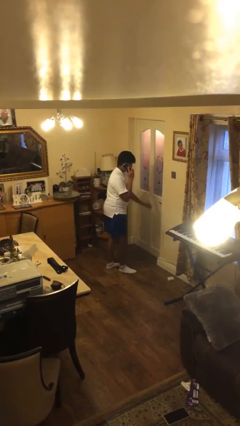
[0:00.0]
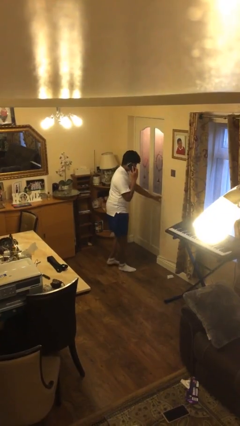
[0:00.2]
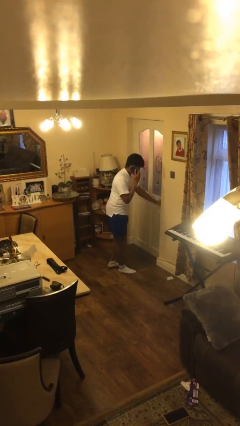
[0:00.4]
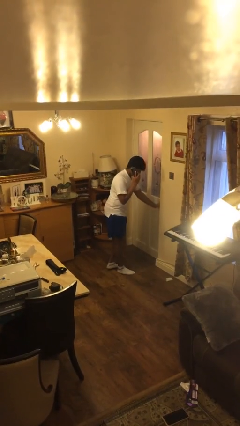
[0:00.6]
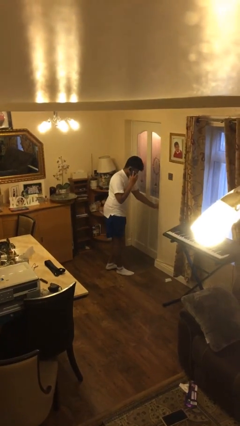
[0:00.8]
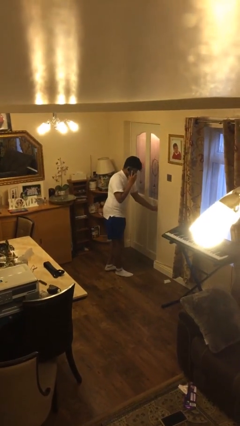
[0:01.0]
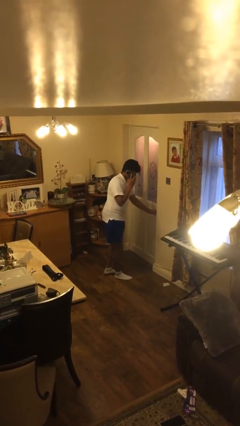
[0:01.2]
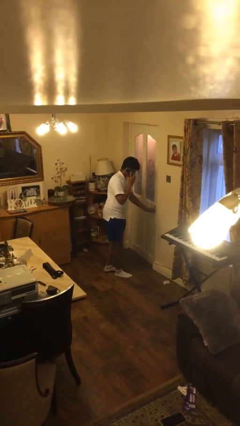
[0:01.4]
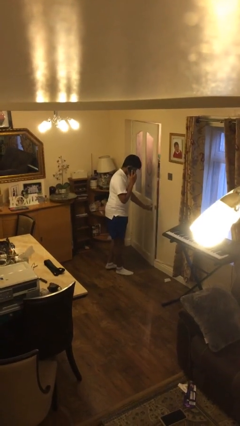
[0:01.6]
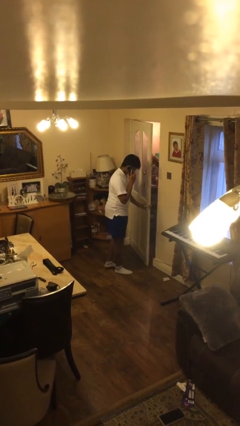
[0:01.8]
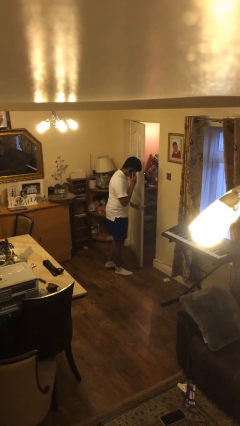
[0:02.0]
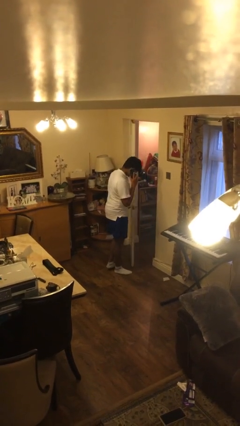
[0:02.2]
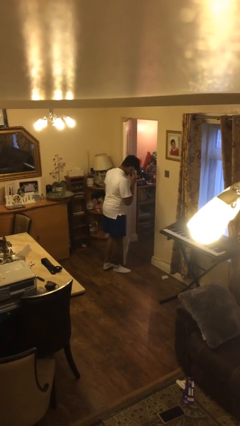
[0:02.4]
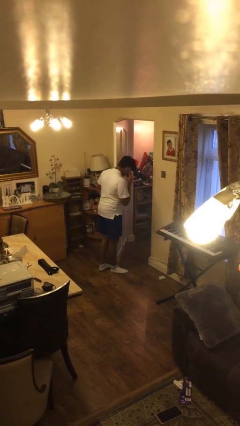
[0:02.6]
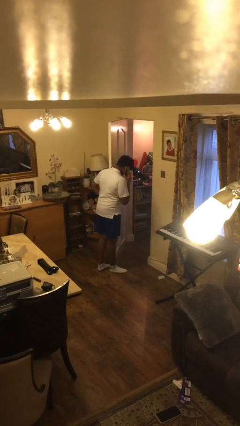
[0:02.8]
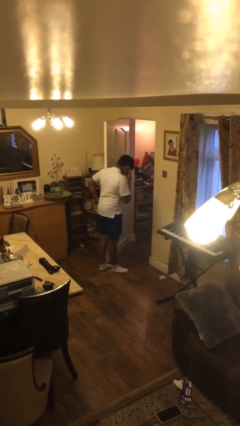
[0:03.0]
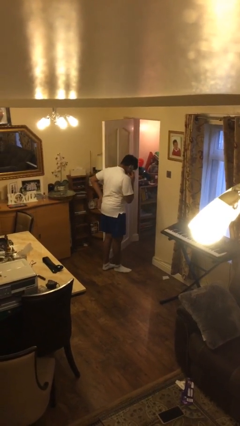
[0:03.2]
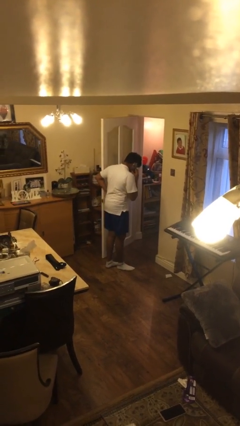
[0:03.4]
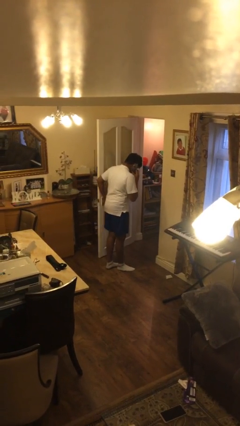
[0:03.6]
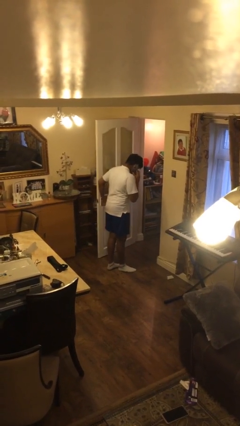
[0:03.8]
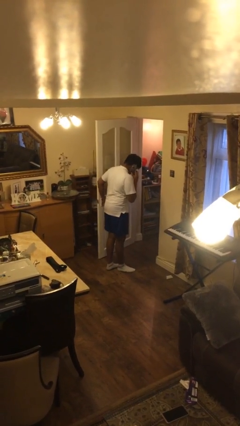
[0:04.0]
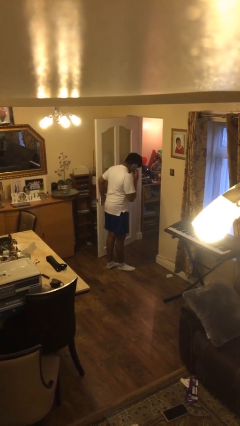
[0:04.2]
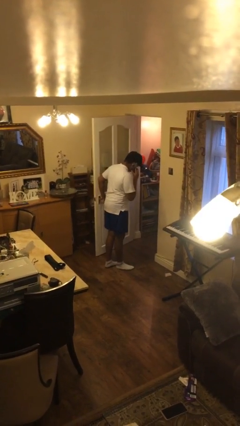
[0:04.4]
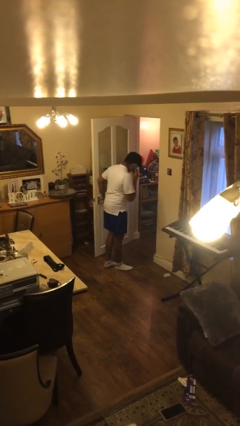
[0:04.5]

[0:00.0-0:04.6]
person opens facility door

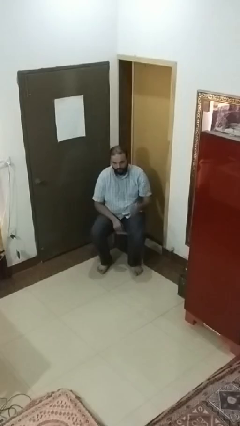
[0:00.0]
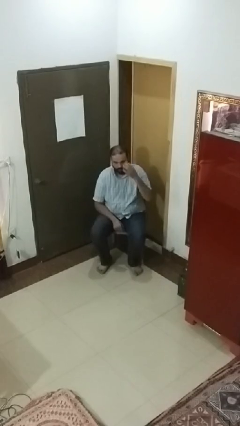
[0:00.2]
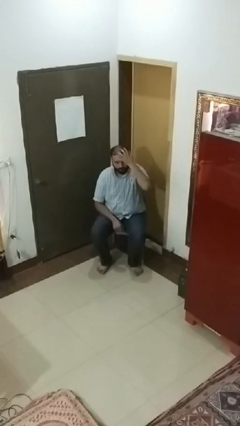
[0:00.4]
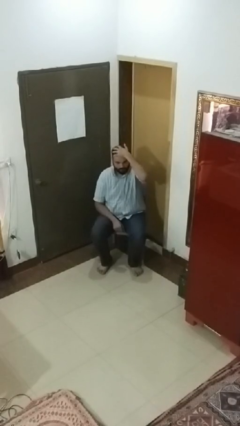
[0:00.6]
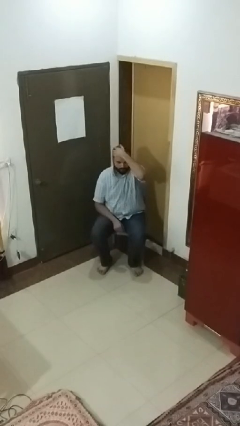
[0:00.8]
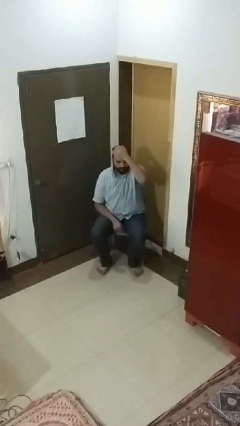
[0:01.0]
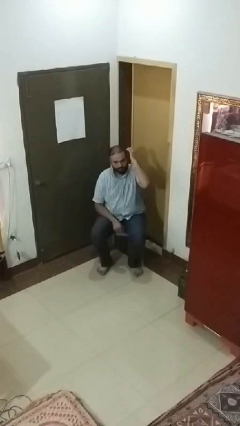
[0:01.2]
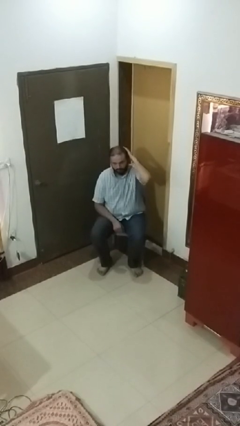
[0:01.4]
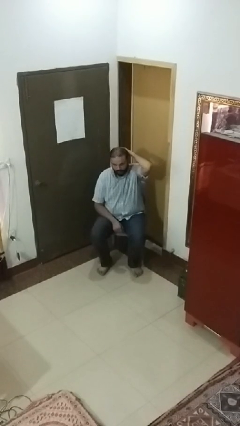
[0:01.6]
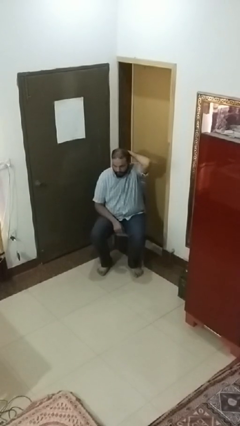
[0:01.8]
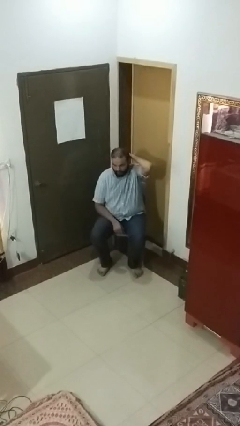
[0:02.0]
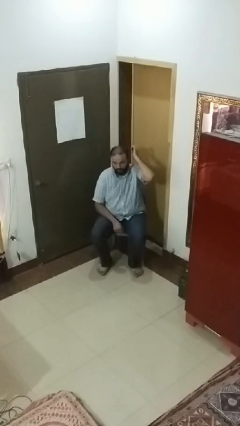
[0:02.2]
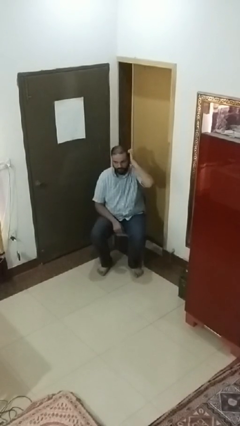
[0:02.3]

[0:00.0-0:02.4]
person strokes hair

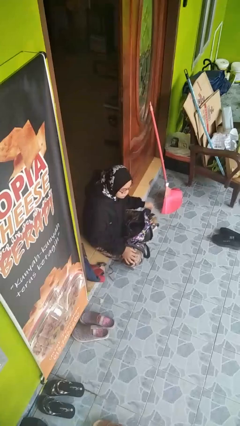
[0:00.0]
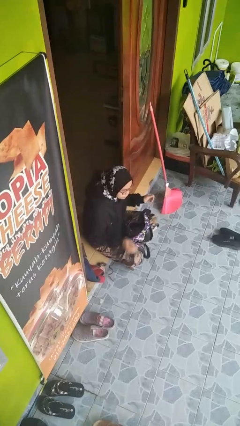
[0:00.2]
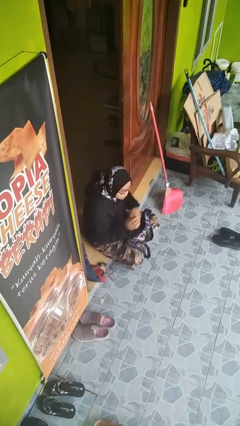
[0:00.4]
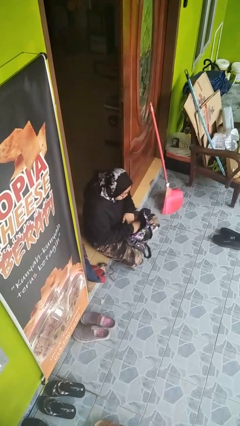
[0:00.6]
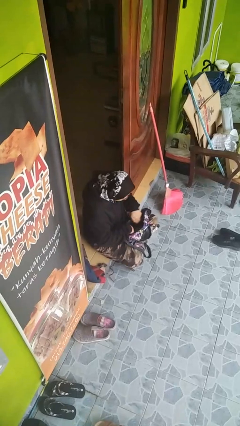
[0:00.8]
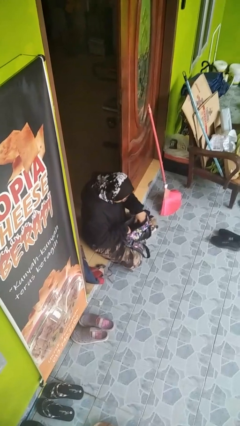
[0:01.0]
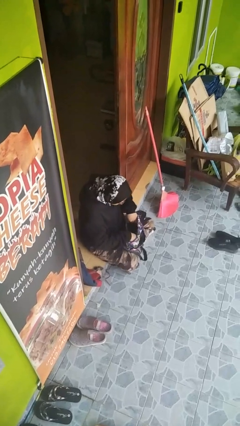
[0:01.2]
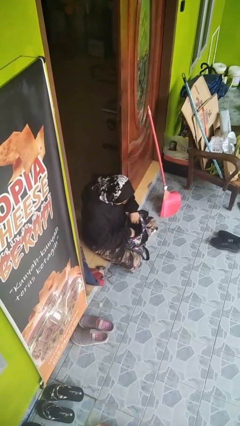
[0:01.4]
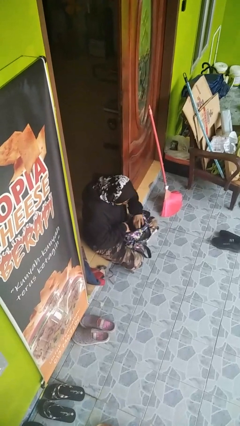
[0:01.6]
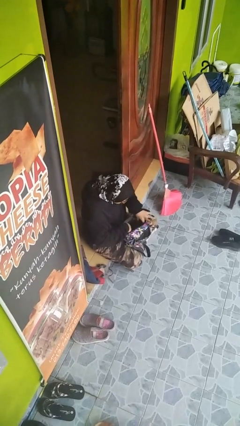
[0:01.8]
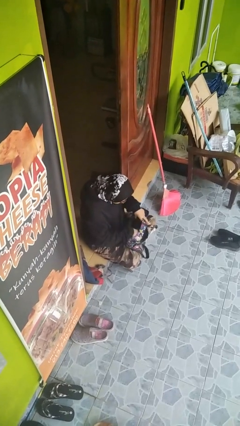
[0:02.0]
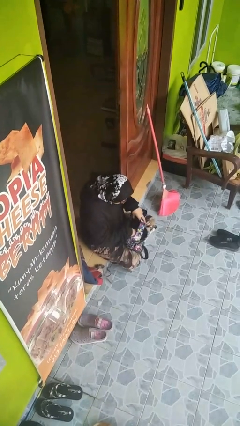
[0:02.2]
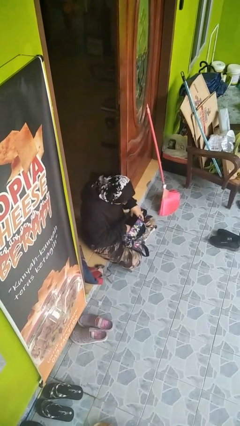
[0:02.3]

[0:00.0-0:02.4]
person searches in purse

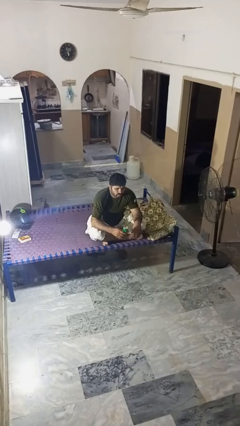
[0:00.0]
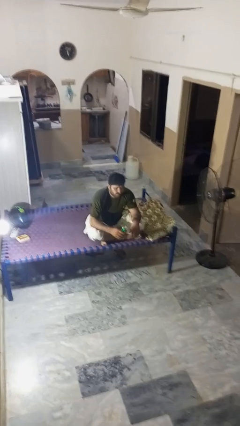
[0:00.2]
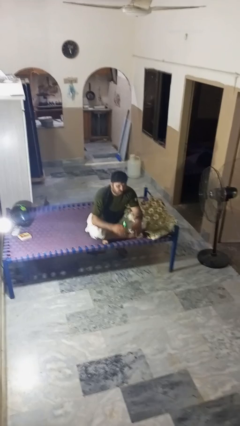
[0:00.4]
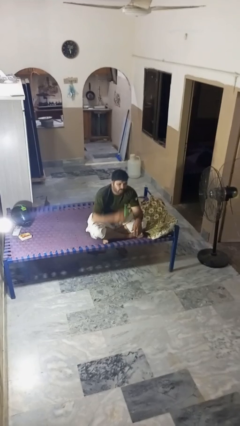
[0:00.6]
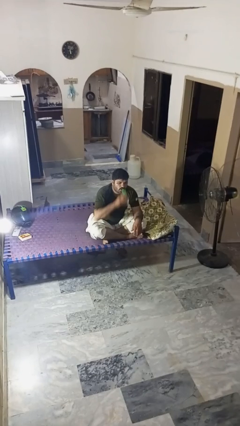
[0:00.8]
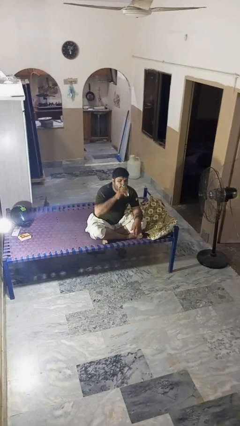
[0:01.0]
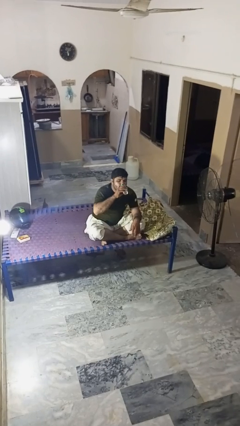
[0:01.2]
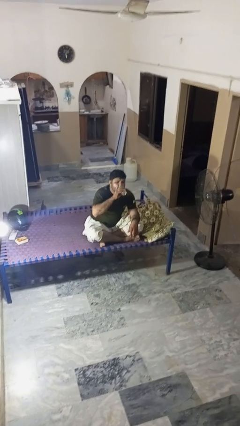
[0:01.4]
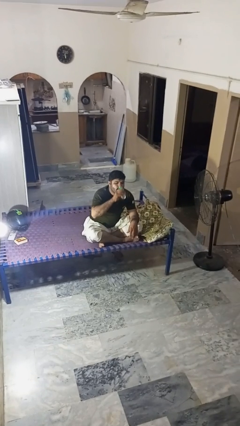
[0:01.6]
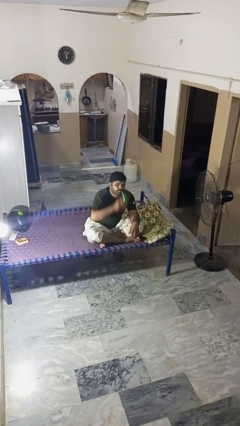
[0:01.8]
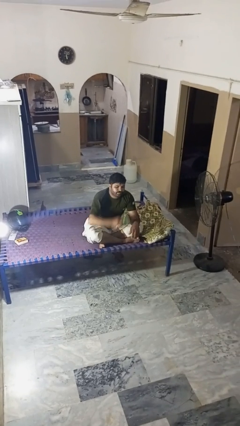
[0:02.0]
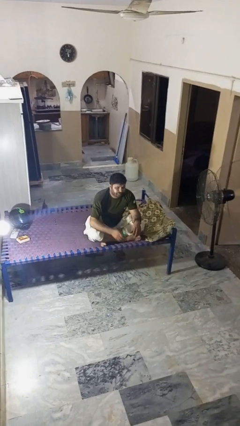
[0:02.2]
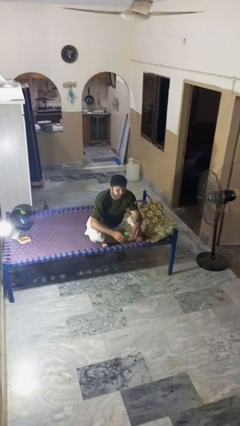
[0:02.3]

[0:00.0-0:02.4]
person drinks from beverage can

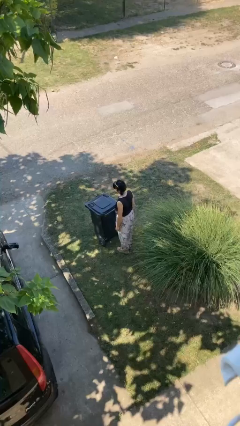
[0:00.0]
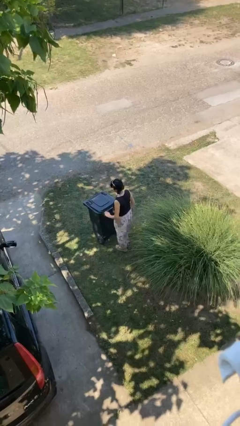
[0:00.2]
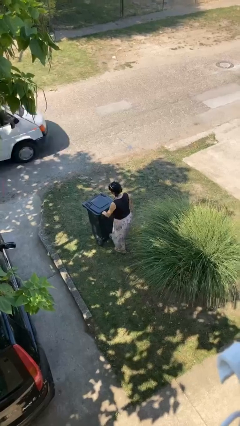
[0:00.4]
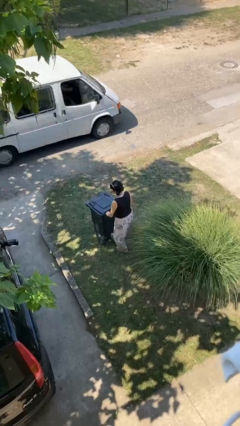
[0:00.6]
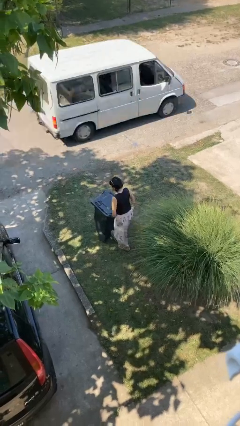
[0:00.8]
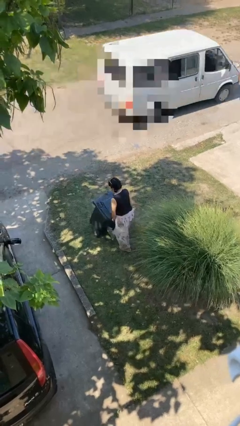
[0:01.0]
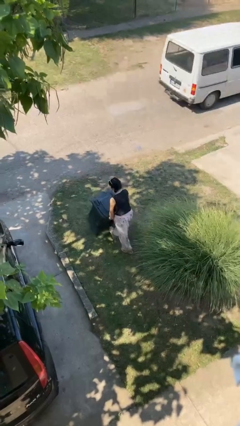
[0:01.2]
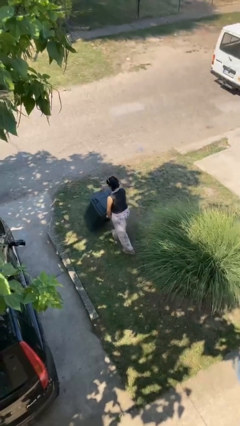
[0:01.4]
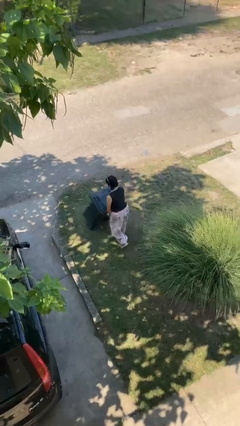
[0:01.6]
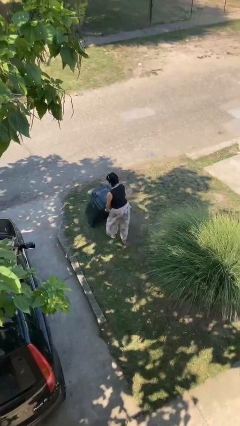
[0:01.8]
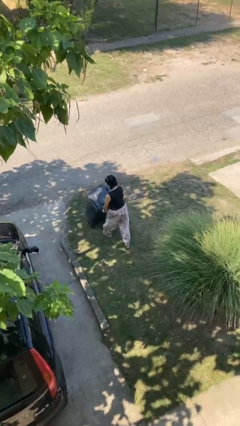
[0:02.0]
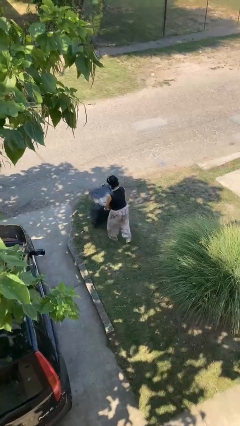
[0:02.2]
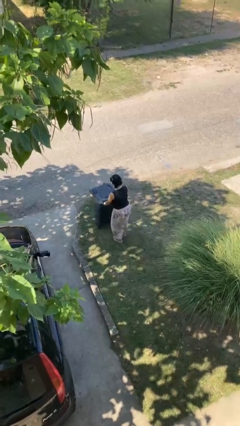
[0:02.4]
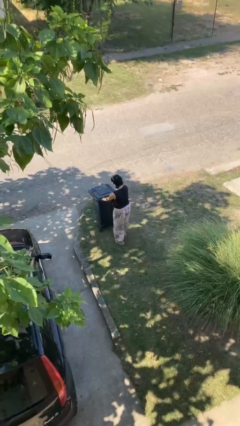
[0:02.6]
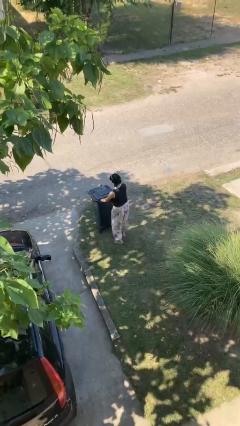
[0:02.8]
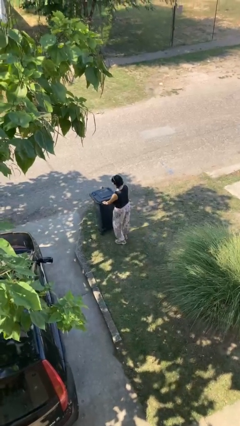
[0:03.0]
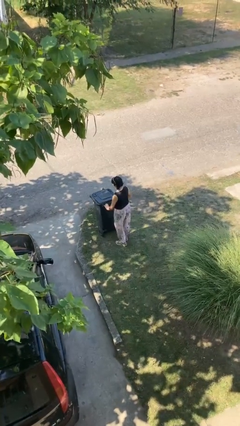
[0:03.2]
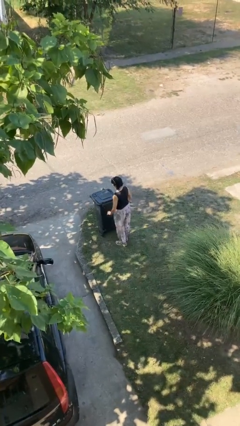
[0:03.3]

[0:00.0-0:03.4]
person pushes wheeled trashcan

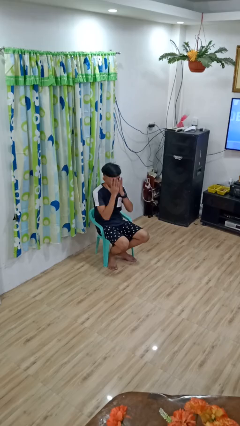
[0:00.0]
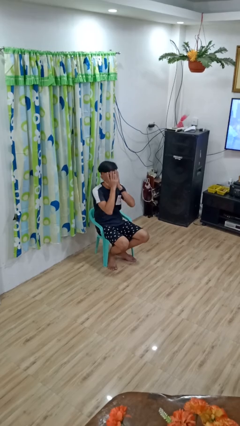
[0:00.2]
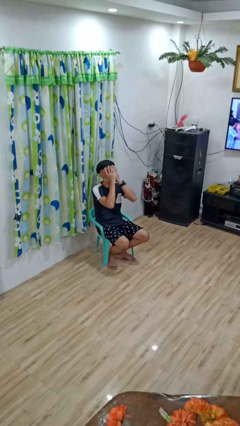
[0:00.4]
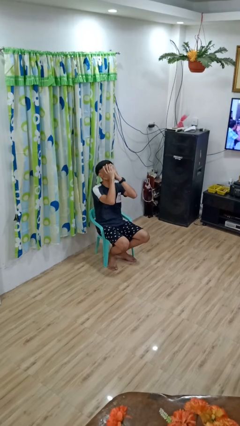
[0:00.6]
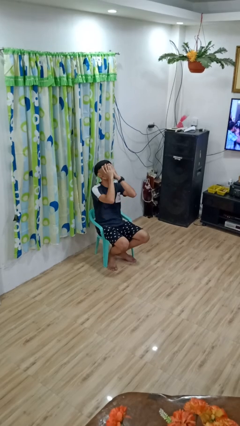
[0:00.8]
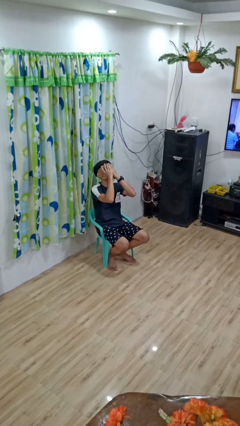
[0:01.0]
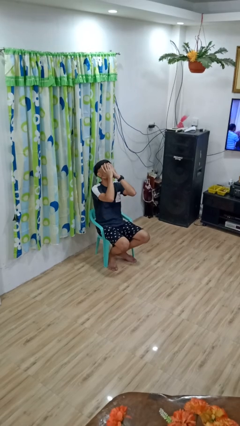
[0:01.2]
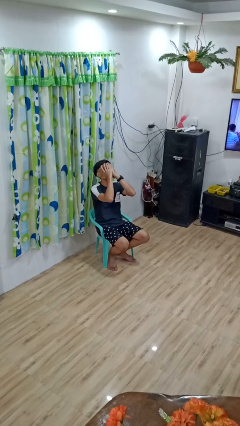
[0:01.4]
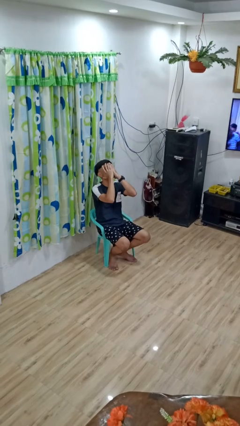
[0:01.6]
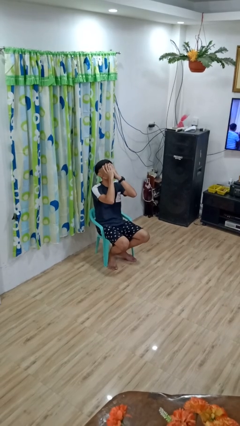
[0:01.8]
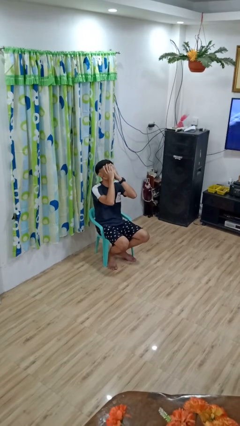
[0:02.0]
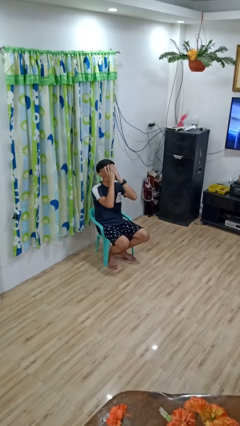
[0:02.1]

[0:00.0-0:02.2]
person covers face with hands
